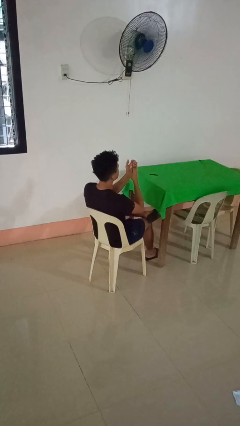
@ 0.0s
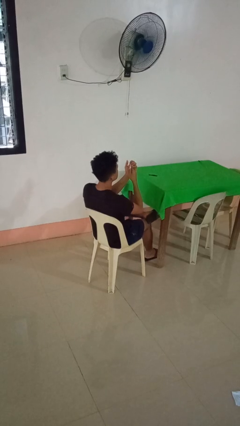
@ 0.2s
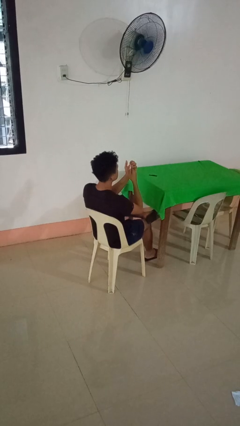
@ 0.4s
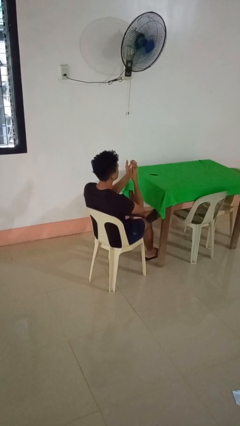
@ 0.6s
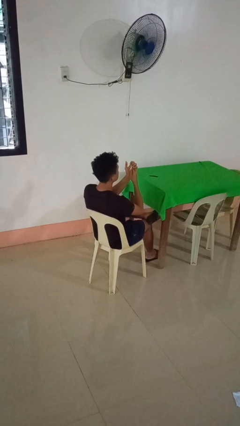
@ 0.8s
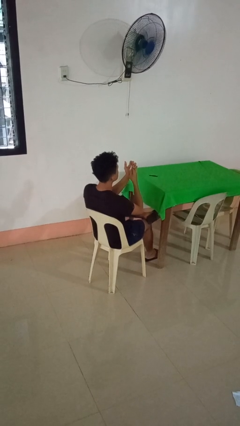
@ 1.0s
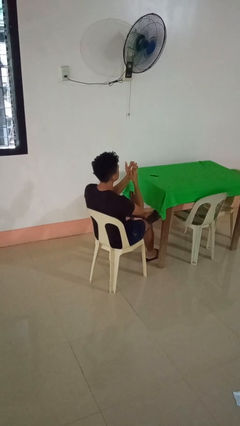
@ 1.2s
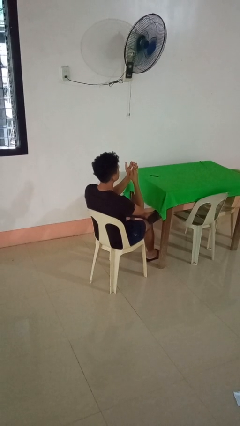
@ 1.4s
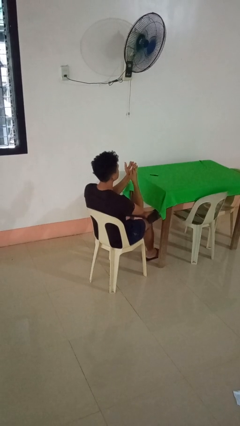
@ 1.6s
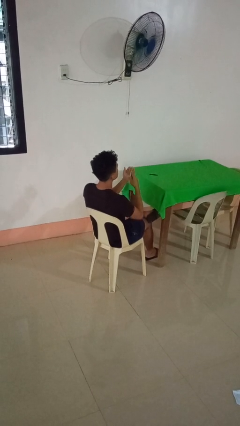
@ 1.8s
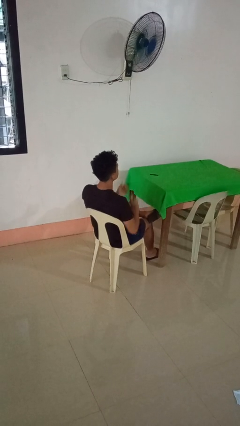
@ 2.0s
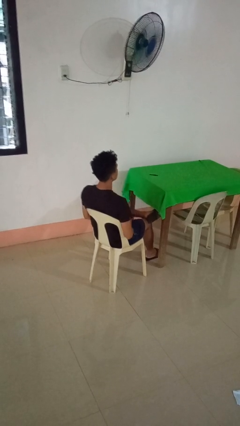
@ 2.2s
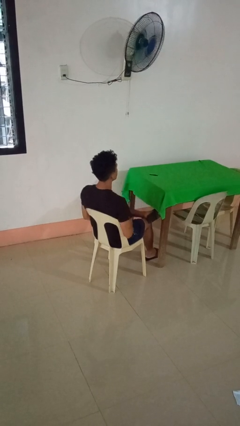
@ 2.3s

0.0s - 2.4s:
person clips fingernails

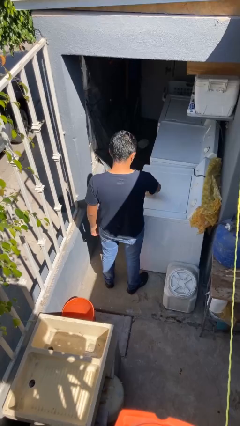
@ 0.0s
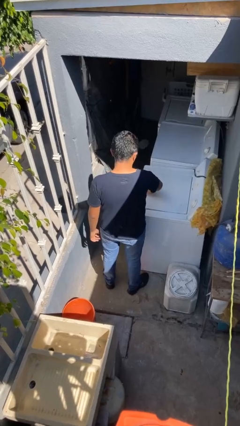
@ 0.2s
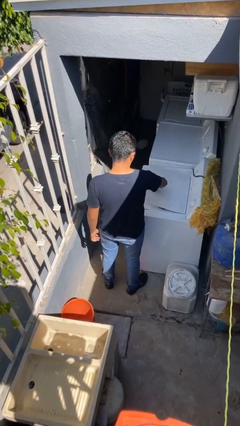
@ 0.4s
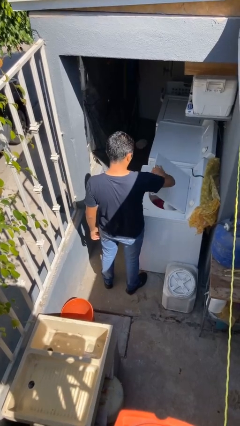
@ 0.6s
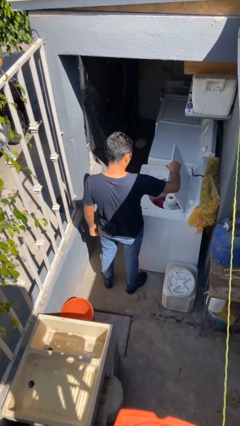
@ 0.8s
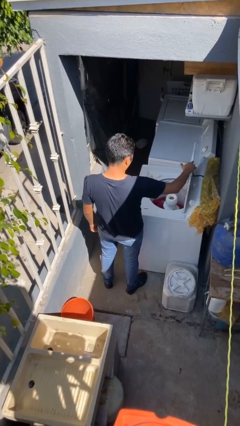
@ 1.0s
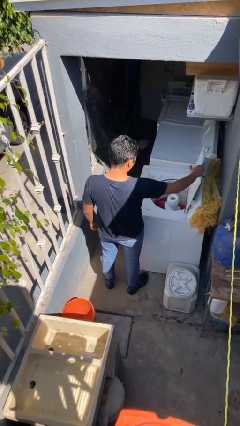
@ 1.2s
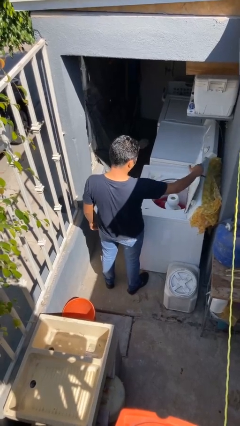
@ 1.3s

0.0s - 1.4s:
person opens clothes washer

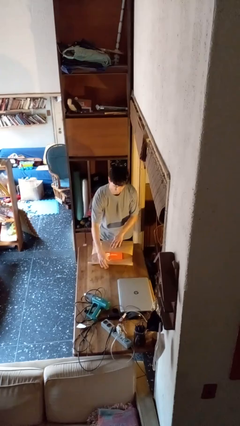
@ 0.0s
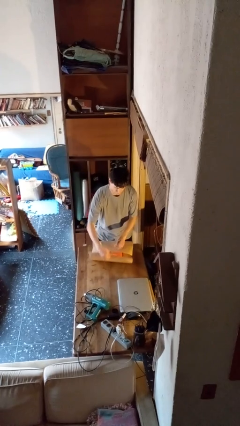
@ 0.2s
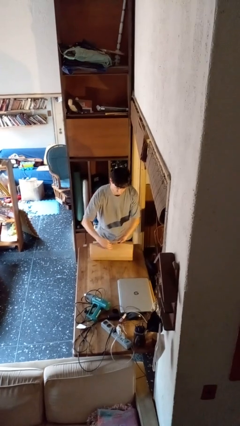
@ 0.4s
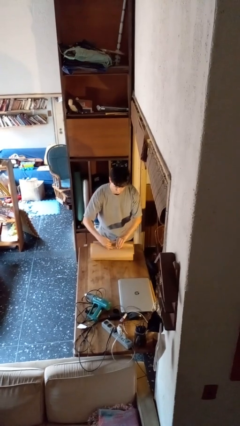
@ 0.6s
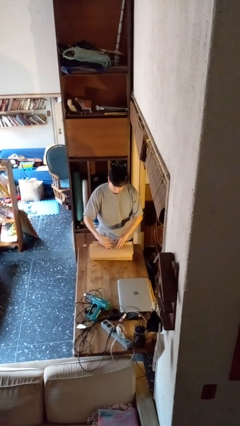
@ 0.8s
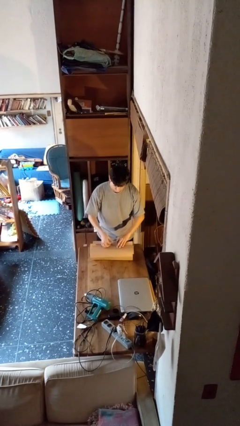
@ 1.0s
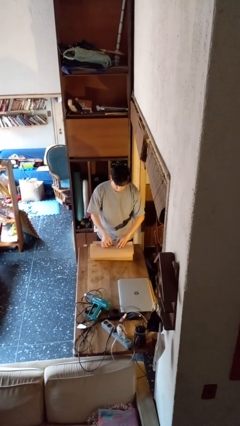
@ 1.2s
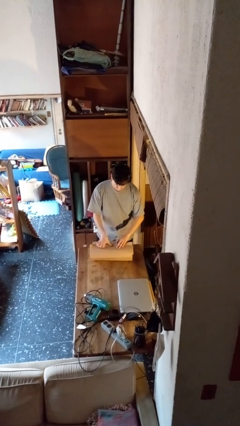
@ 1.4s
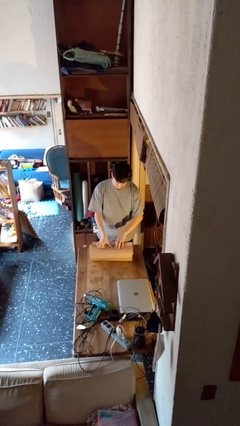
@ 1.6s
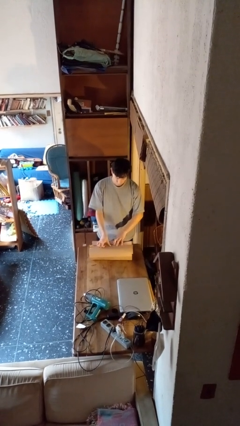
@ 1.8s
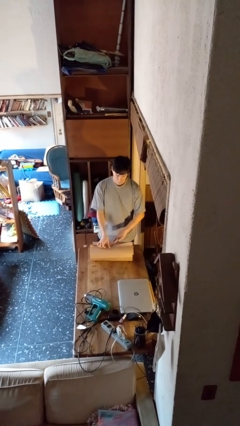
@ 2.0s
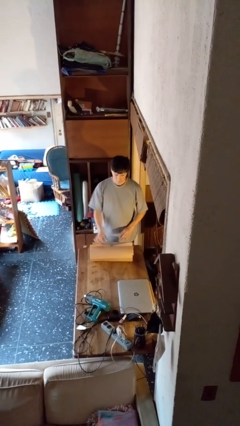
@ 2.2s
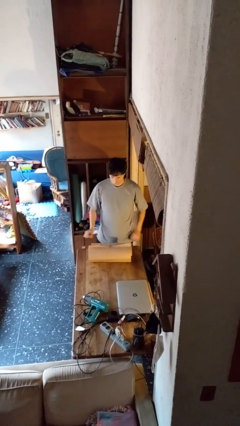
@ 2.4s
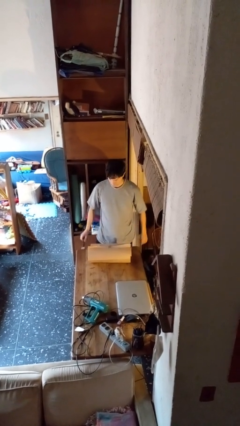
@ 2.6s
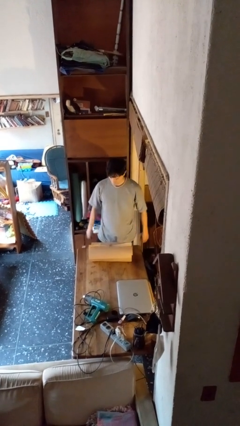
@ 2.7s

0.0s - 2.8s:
person wraps box

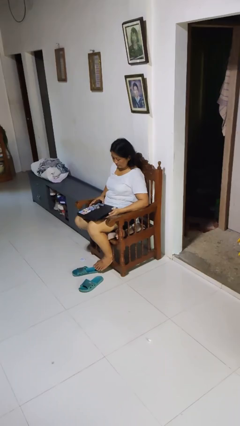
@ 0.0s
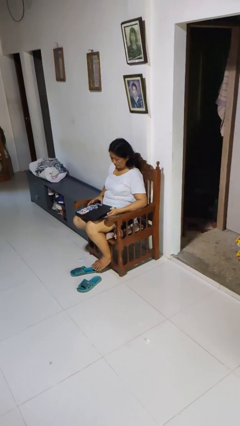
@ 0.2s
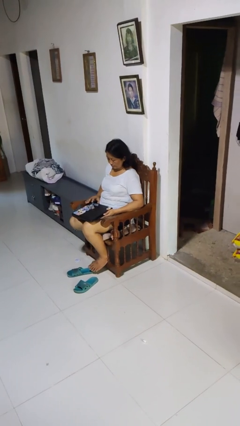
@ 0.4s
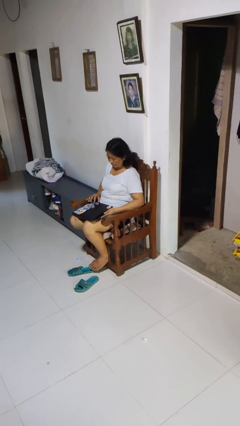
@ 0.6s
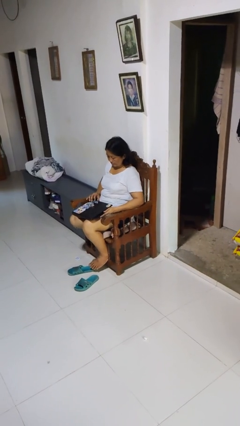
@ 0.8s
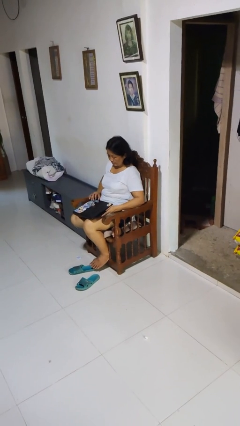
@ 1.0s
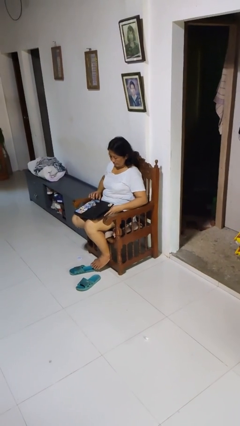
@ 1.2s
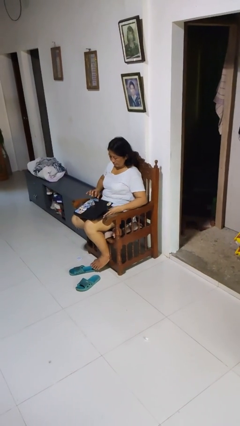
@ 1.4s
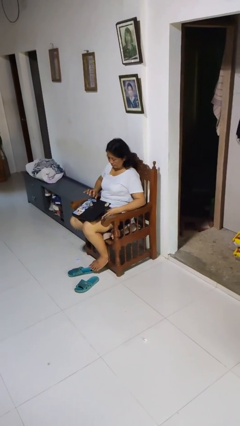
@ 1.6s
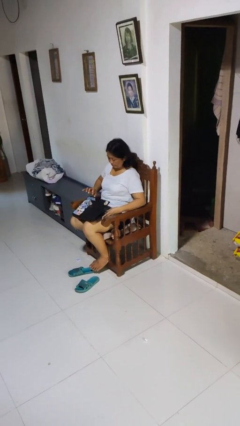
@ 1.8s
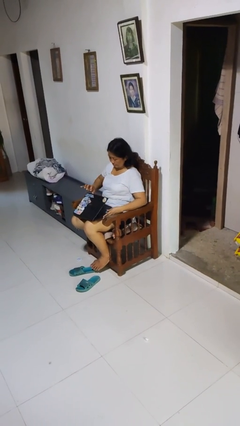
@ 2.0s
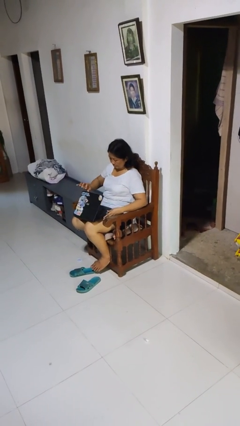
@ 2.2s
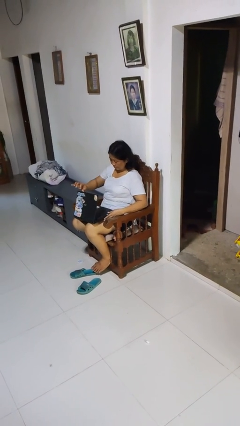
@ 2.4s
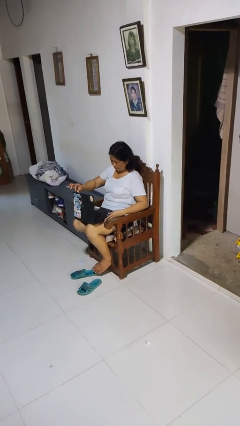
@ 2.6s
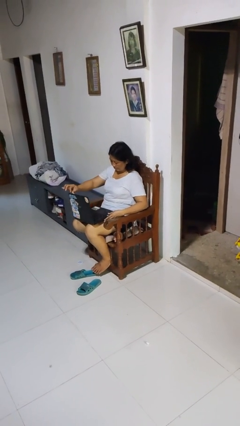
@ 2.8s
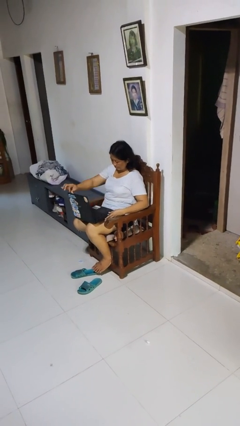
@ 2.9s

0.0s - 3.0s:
person opens laptop

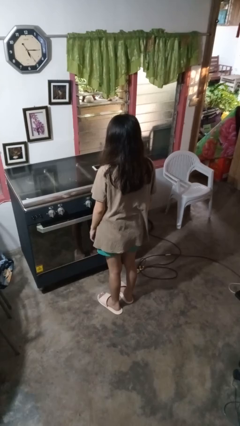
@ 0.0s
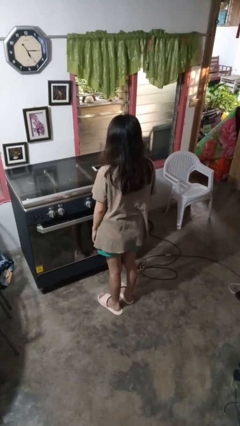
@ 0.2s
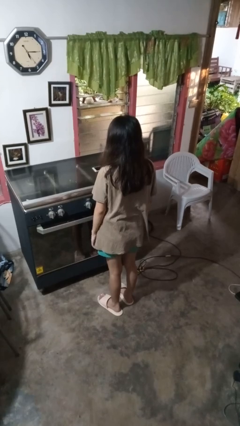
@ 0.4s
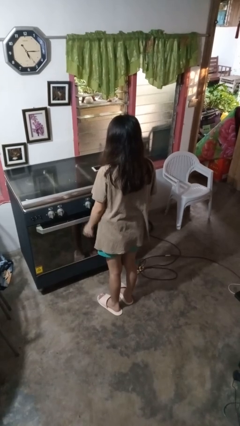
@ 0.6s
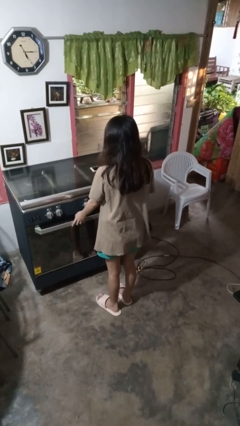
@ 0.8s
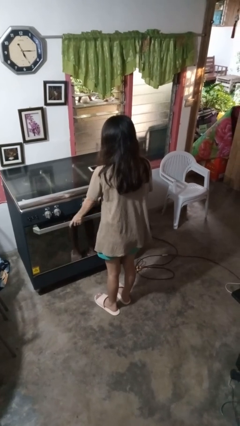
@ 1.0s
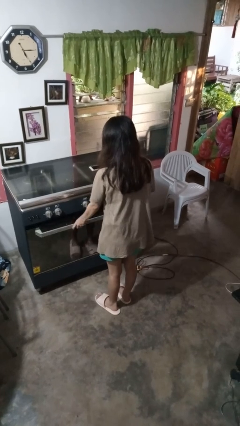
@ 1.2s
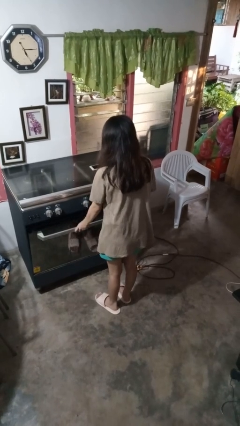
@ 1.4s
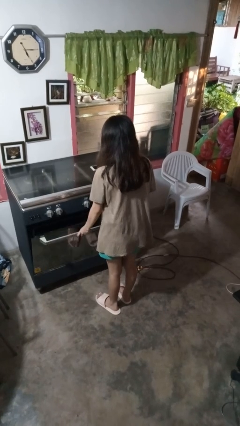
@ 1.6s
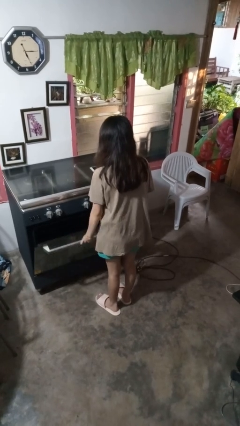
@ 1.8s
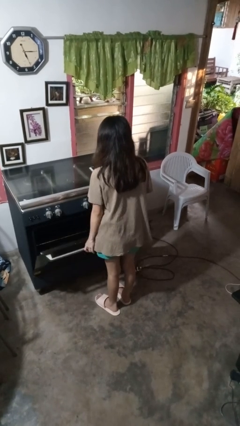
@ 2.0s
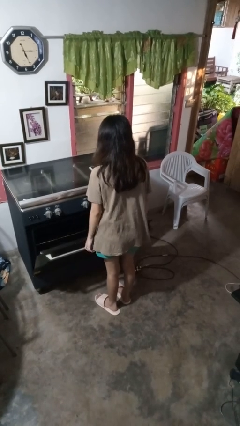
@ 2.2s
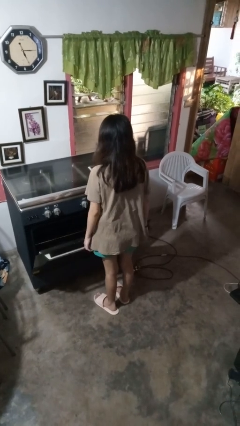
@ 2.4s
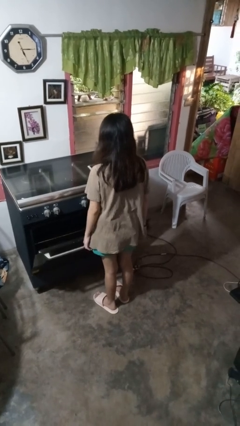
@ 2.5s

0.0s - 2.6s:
person opens oven door

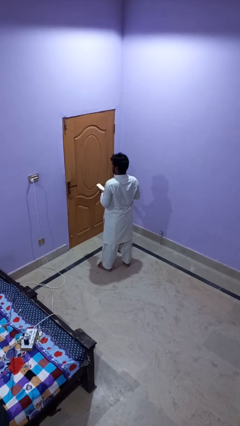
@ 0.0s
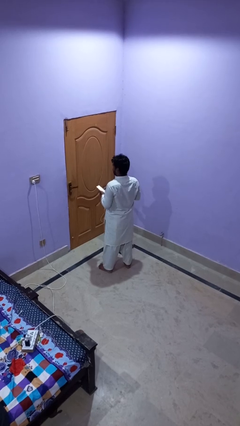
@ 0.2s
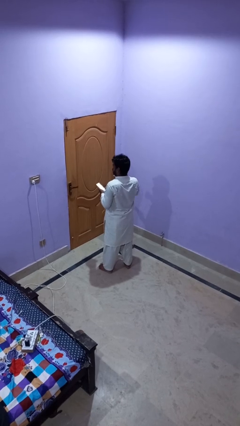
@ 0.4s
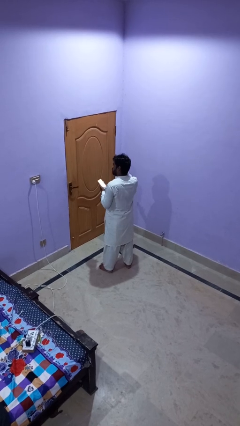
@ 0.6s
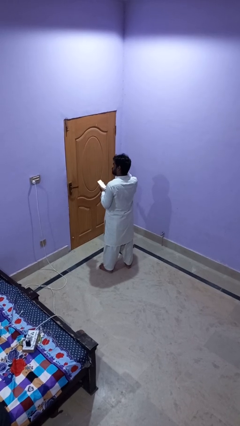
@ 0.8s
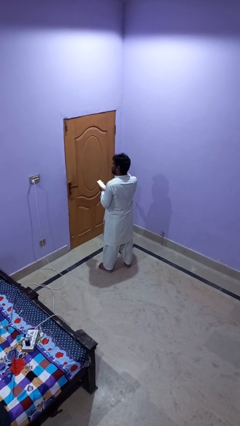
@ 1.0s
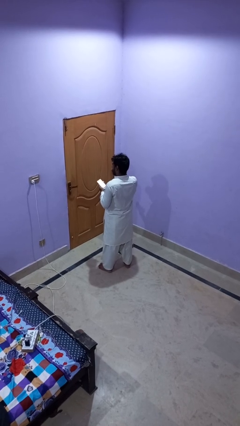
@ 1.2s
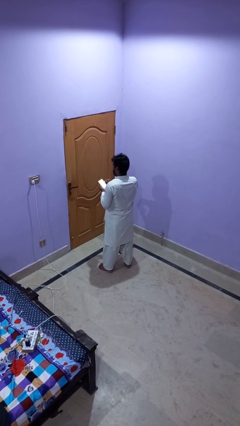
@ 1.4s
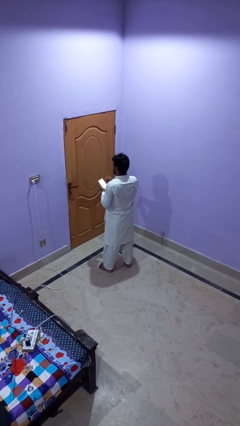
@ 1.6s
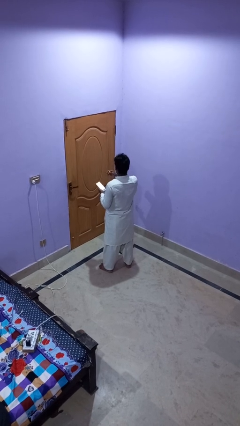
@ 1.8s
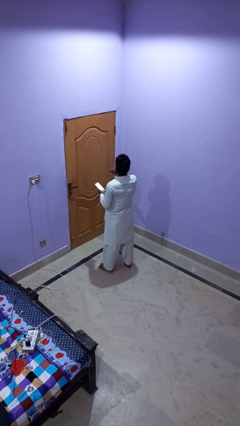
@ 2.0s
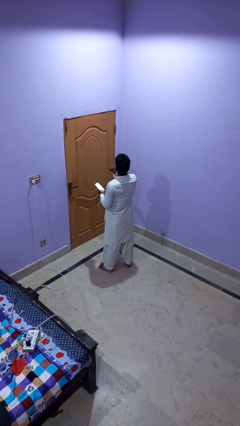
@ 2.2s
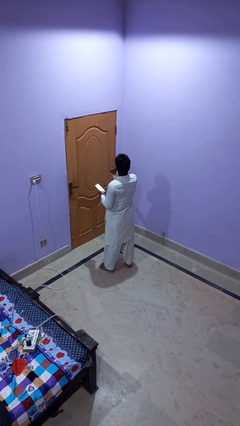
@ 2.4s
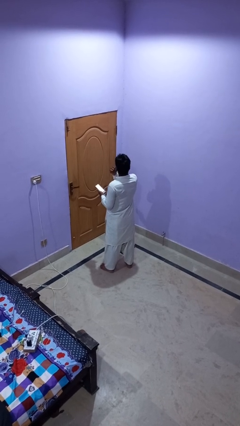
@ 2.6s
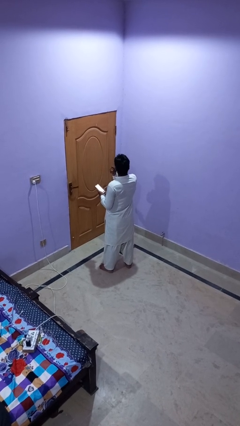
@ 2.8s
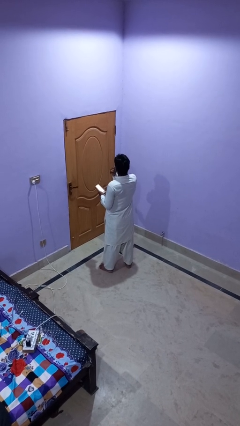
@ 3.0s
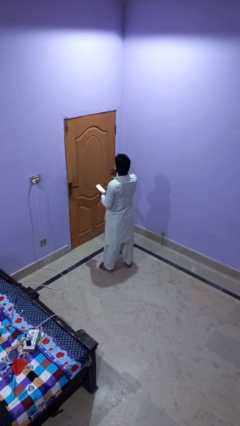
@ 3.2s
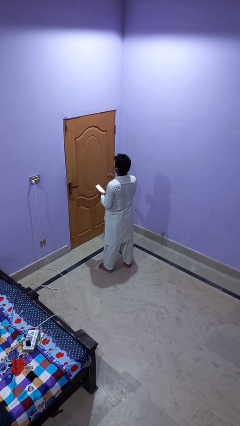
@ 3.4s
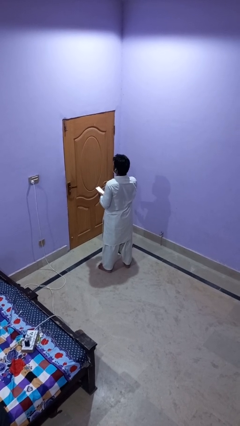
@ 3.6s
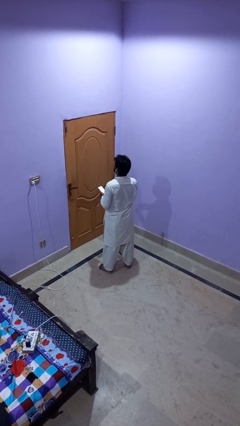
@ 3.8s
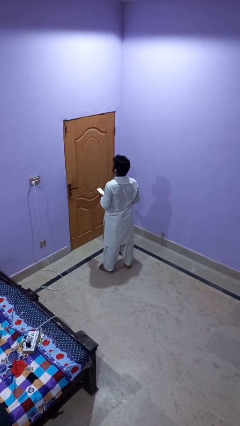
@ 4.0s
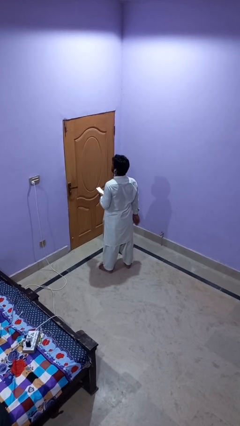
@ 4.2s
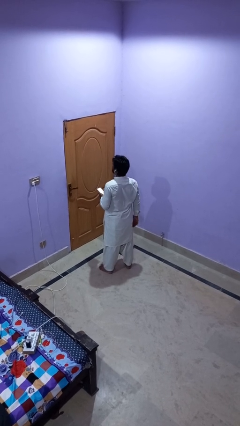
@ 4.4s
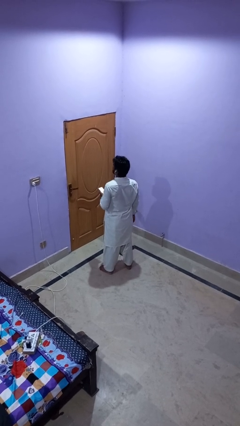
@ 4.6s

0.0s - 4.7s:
person puts on headphones

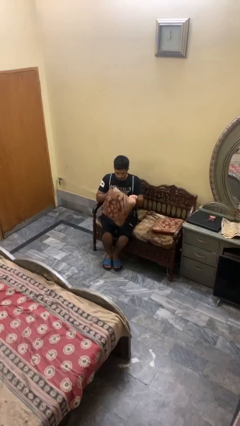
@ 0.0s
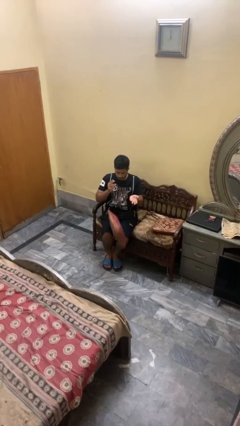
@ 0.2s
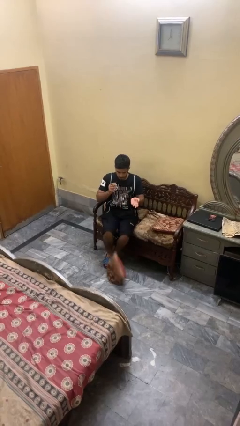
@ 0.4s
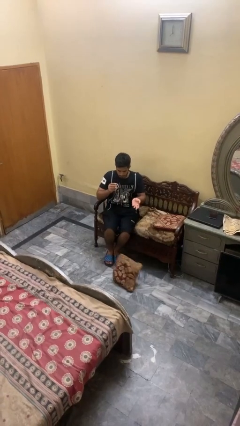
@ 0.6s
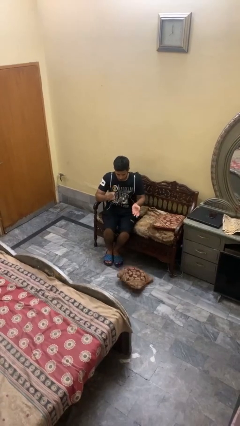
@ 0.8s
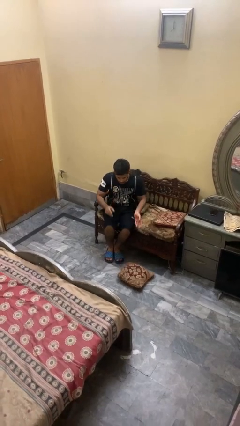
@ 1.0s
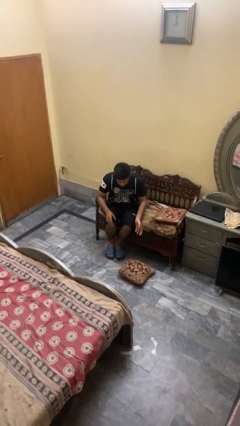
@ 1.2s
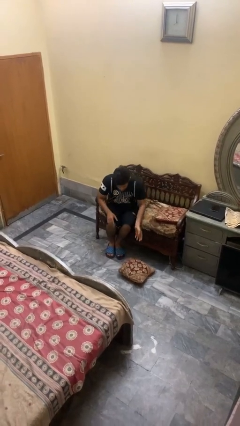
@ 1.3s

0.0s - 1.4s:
person drops object
